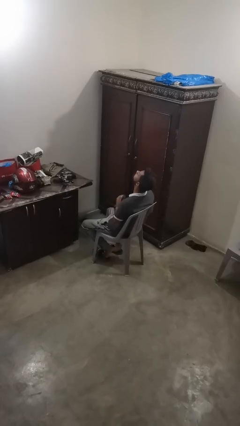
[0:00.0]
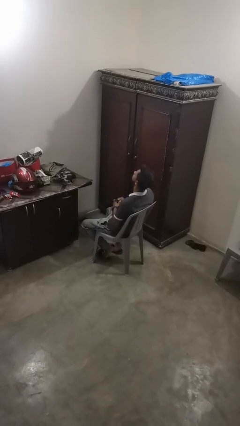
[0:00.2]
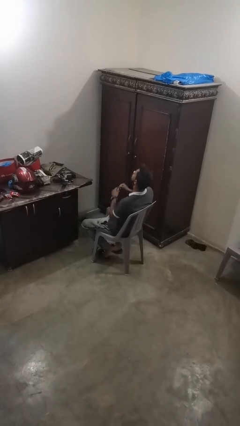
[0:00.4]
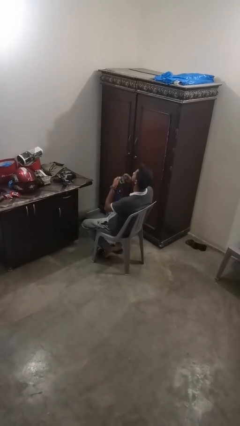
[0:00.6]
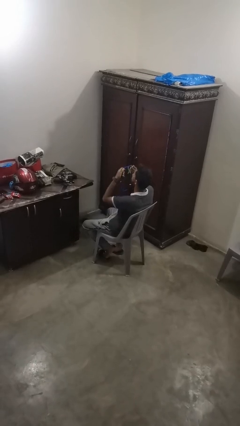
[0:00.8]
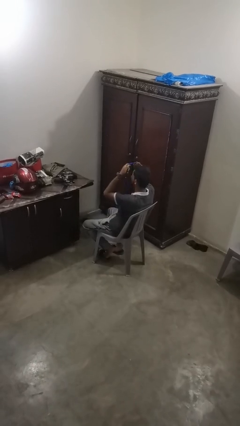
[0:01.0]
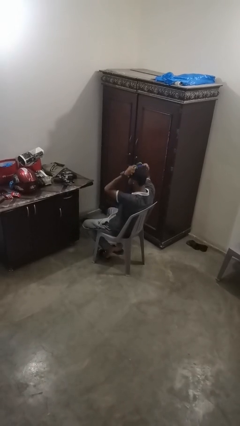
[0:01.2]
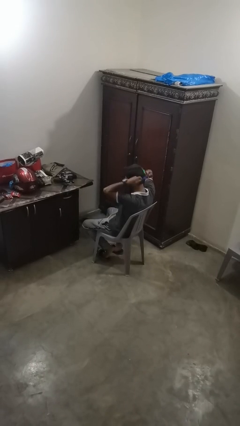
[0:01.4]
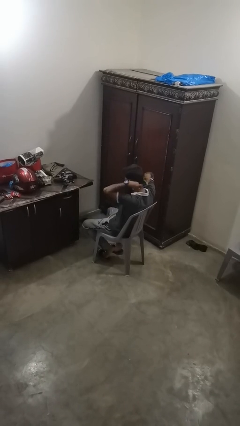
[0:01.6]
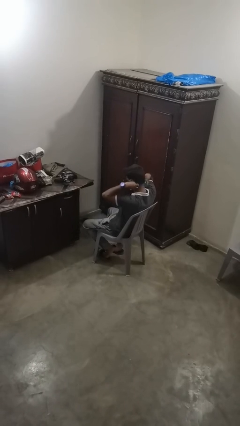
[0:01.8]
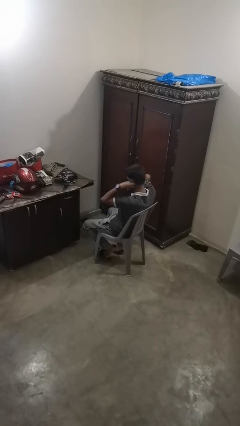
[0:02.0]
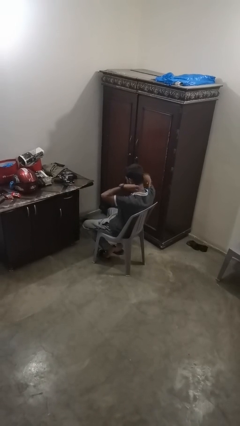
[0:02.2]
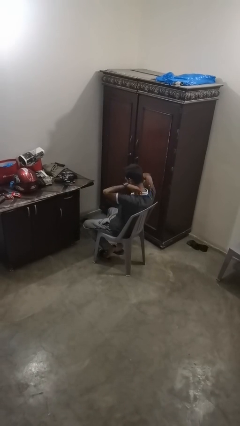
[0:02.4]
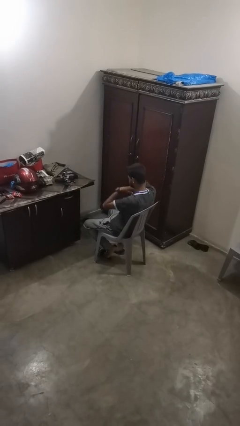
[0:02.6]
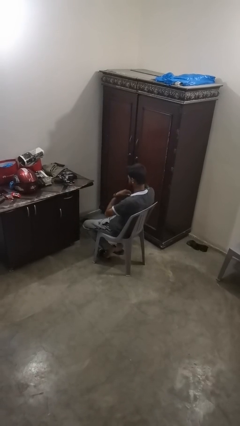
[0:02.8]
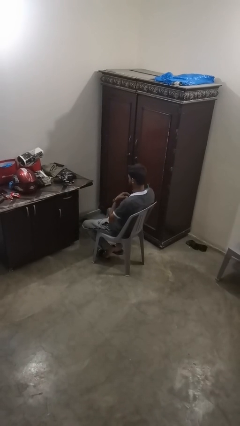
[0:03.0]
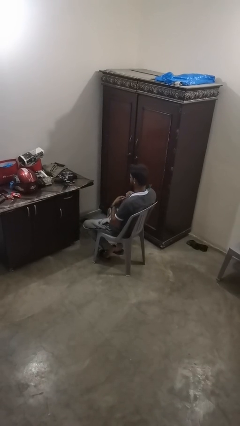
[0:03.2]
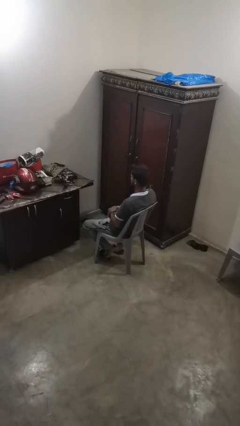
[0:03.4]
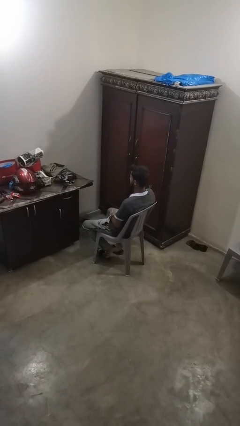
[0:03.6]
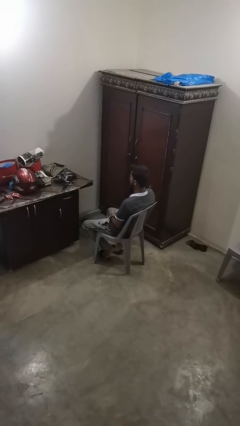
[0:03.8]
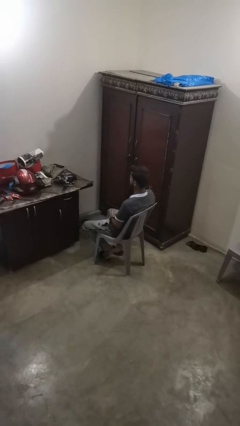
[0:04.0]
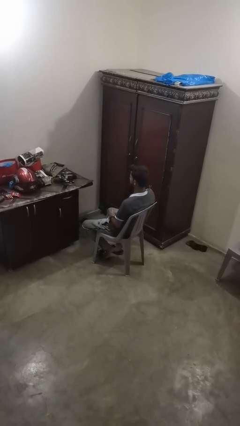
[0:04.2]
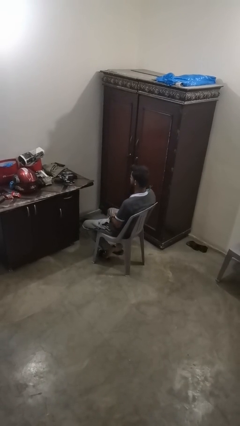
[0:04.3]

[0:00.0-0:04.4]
person puts on necklace

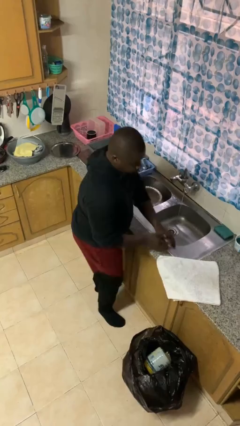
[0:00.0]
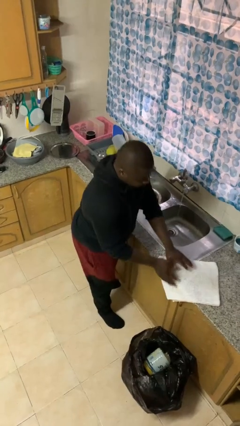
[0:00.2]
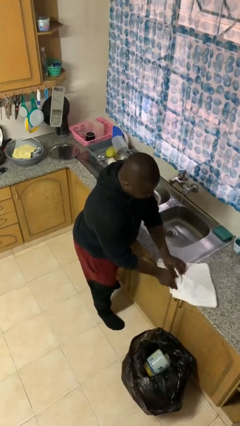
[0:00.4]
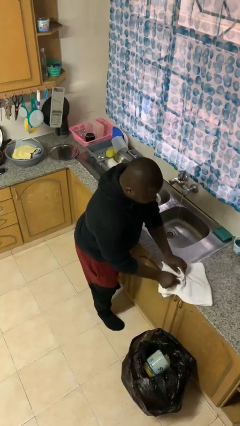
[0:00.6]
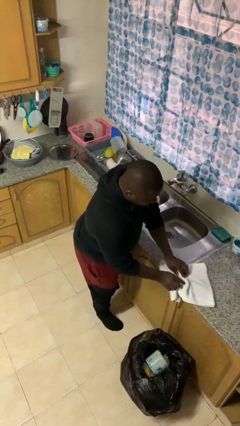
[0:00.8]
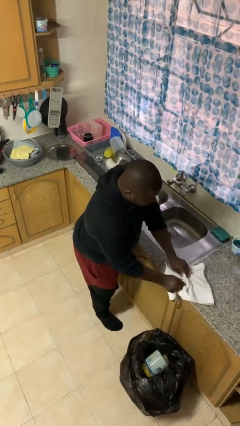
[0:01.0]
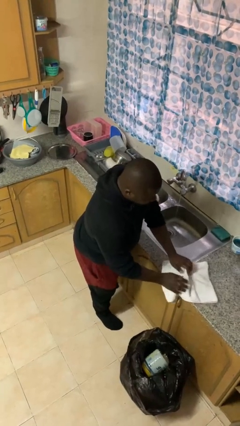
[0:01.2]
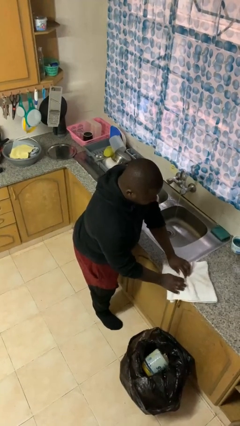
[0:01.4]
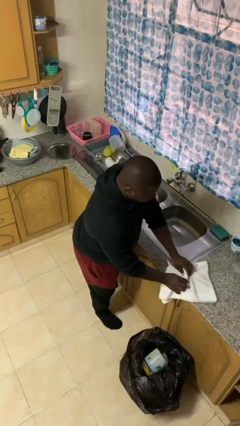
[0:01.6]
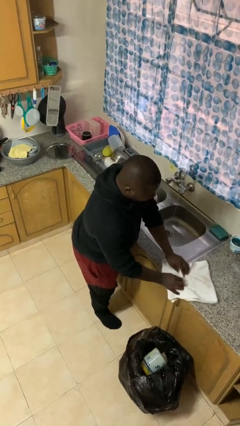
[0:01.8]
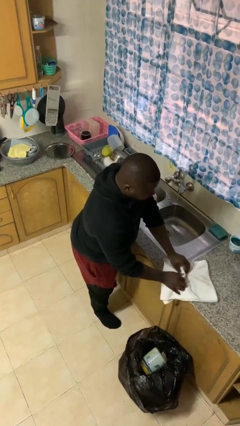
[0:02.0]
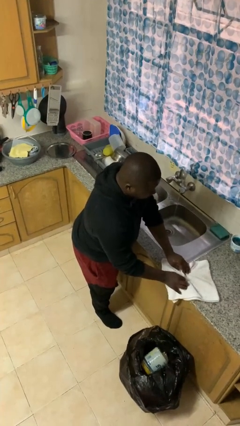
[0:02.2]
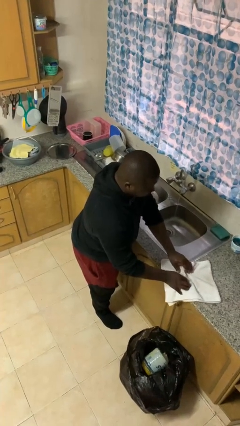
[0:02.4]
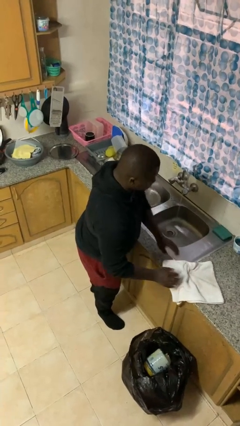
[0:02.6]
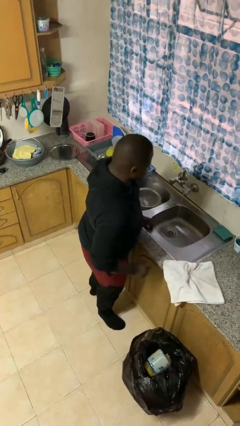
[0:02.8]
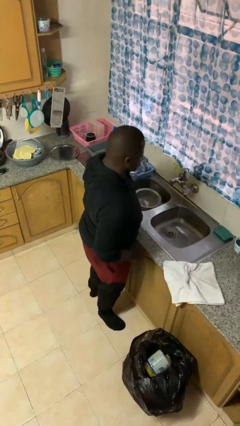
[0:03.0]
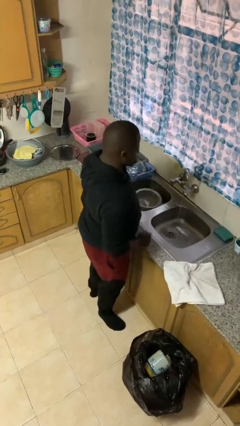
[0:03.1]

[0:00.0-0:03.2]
person dries hands with towel

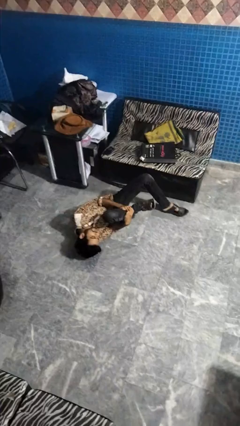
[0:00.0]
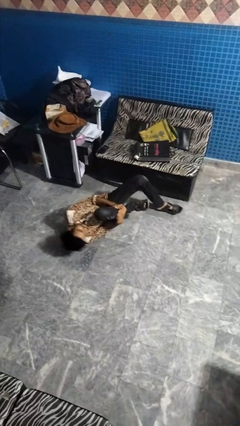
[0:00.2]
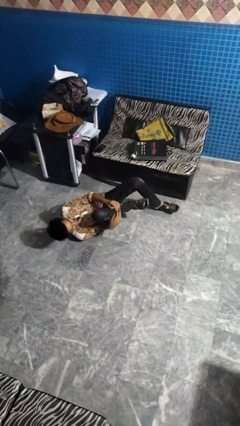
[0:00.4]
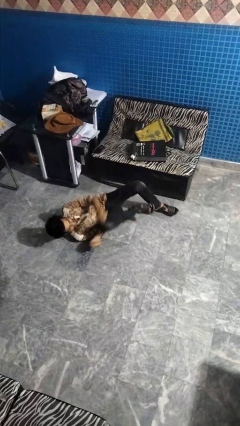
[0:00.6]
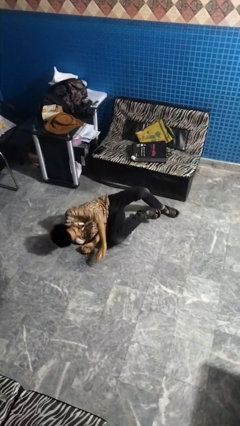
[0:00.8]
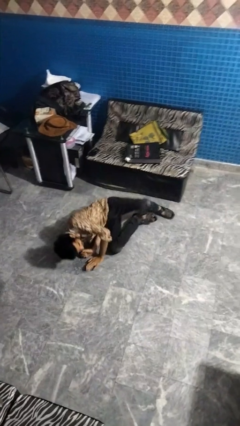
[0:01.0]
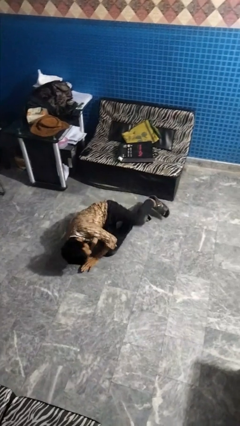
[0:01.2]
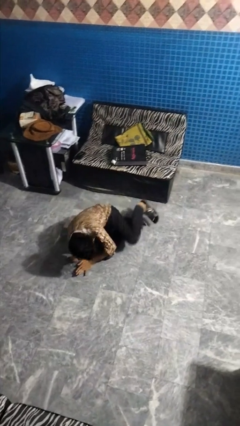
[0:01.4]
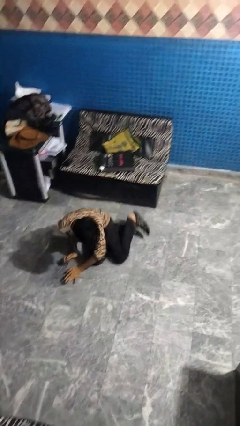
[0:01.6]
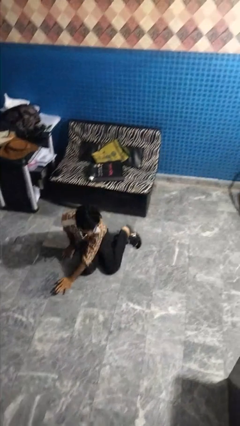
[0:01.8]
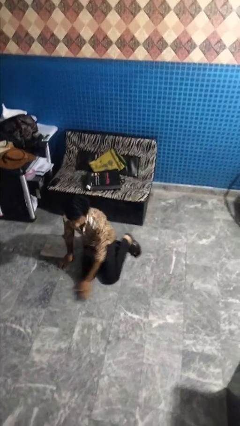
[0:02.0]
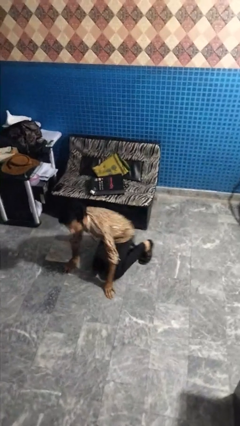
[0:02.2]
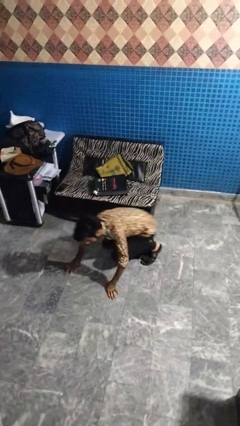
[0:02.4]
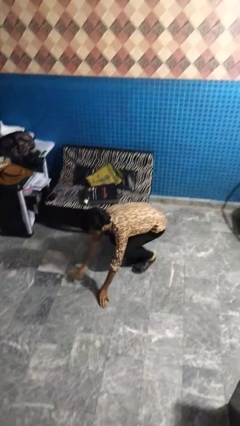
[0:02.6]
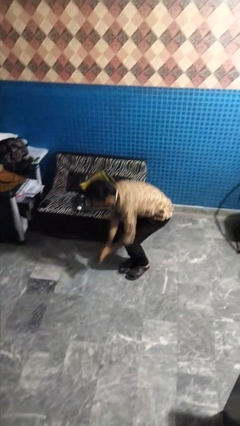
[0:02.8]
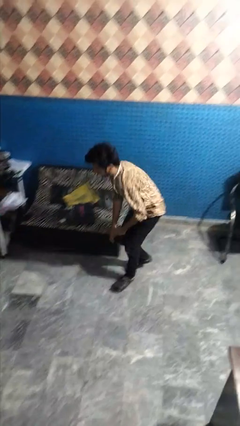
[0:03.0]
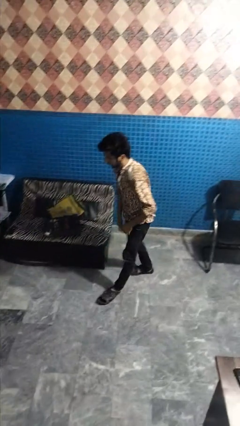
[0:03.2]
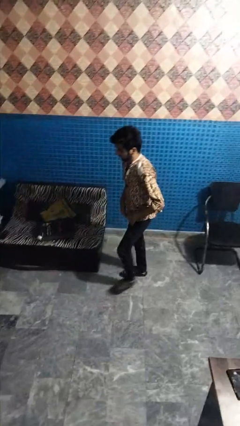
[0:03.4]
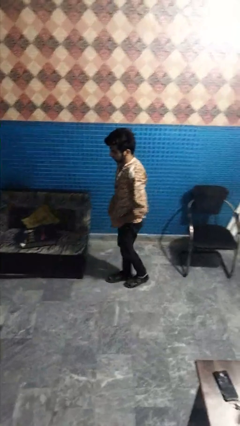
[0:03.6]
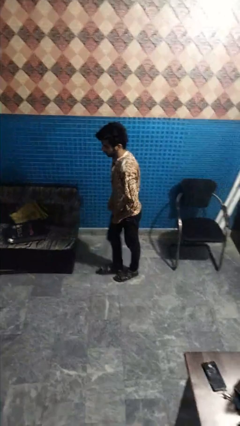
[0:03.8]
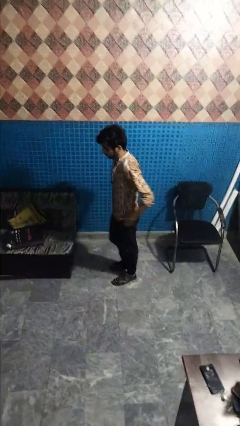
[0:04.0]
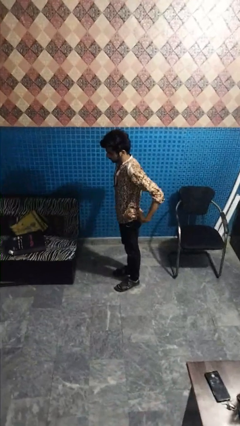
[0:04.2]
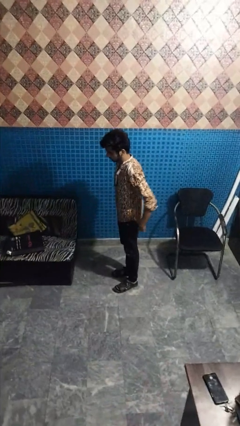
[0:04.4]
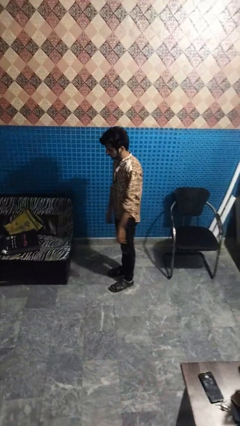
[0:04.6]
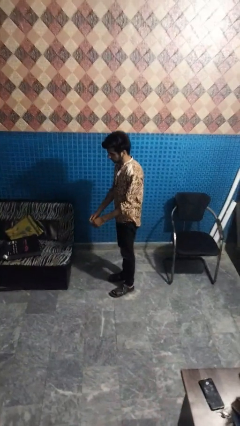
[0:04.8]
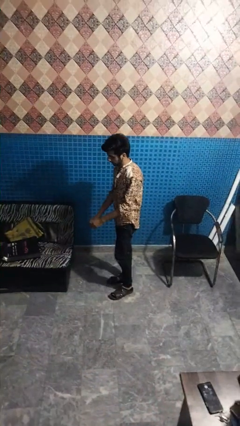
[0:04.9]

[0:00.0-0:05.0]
person stands up from floor

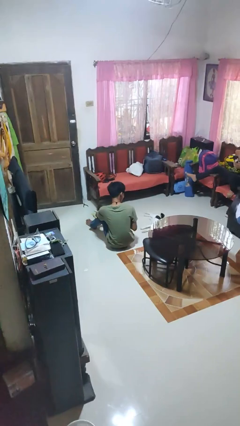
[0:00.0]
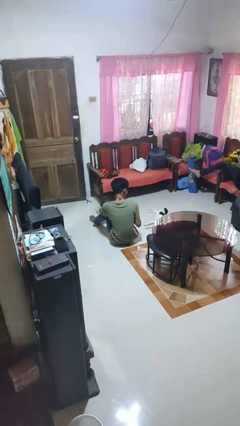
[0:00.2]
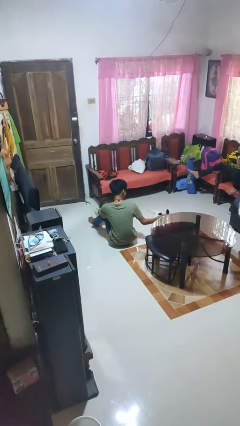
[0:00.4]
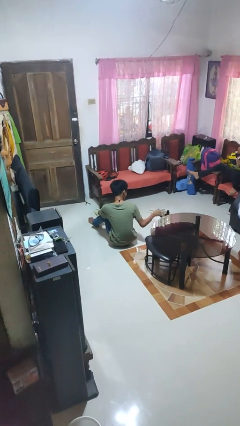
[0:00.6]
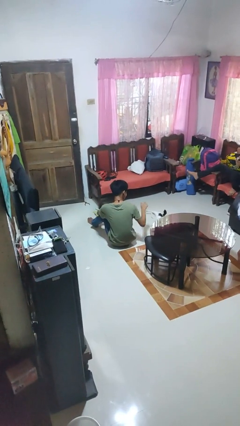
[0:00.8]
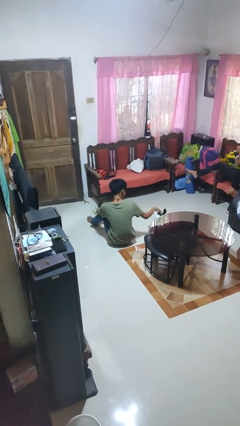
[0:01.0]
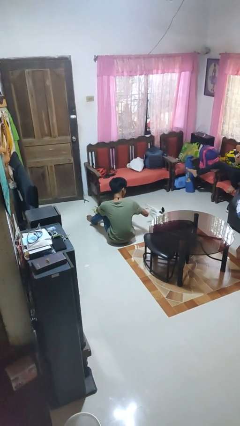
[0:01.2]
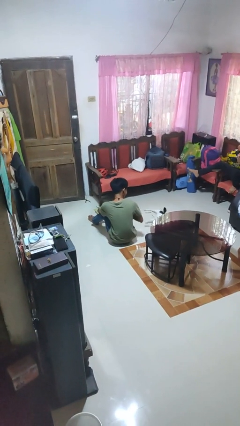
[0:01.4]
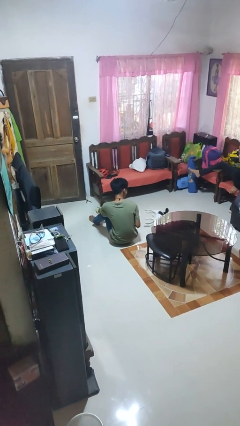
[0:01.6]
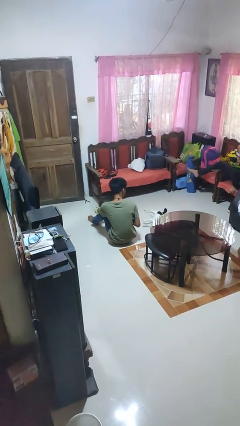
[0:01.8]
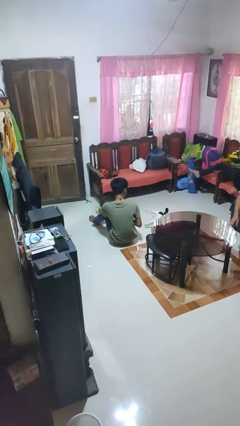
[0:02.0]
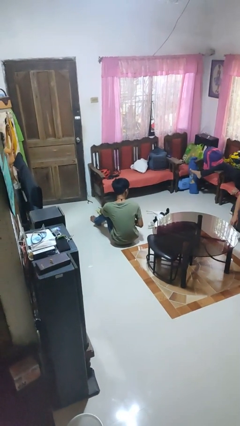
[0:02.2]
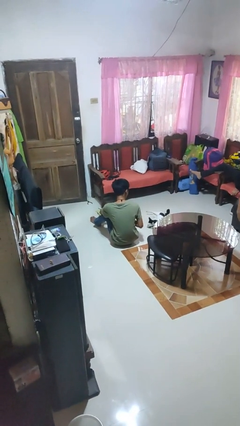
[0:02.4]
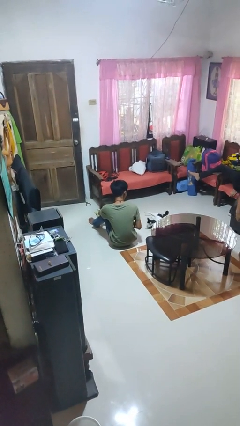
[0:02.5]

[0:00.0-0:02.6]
person pets cat

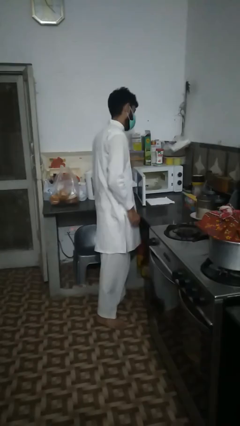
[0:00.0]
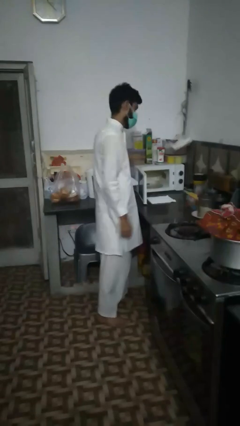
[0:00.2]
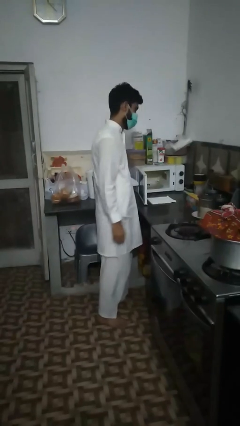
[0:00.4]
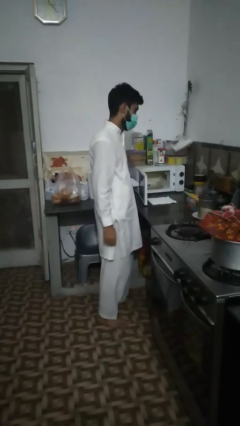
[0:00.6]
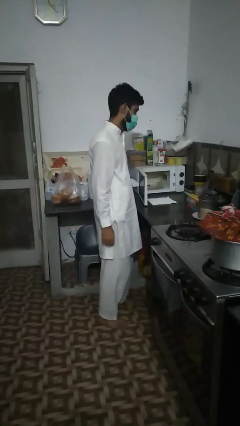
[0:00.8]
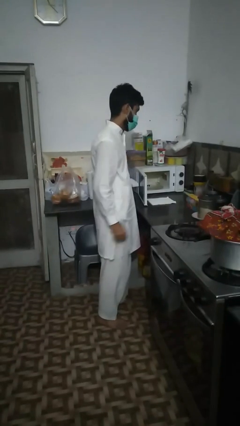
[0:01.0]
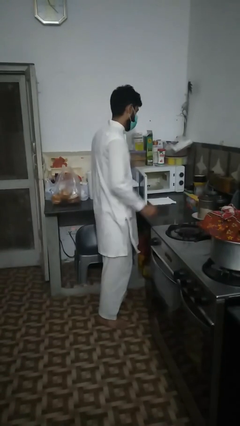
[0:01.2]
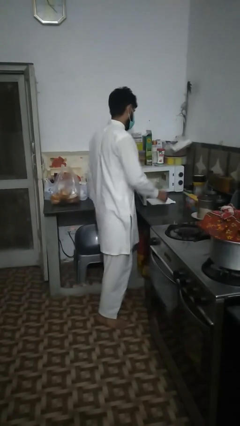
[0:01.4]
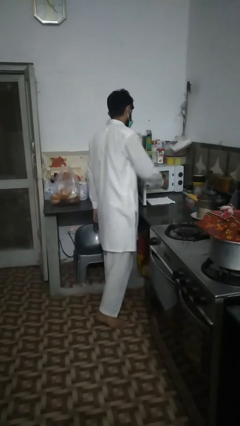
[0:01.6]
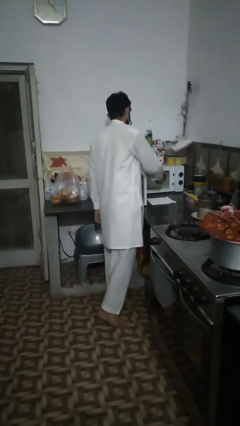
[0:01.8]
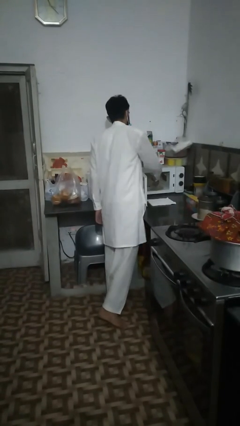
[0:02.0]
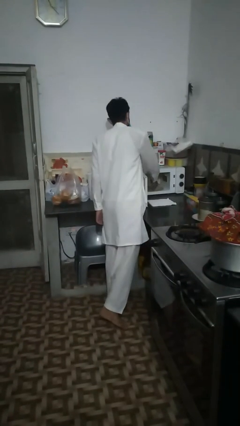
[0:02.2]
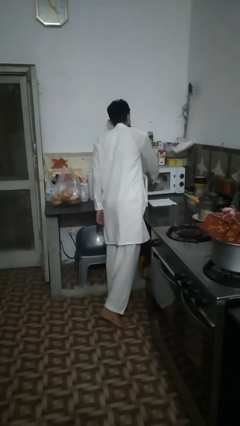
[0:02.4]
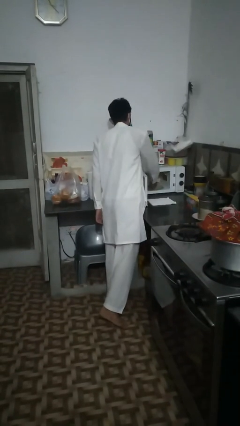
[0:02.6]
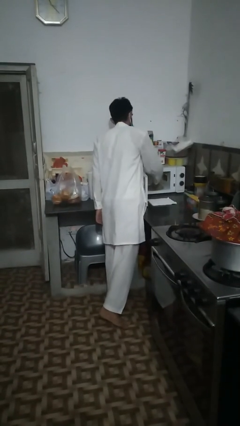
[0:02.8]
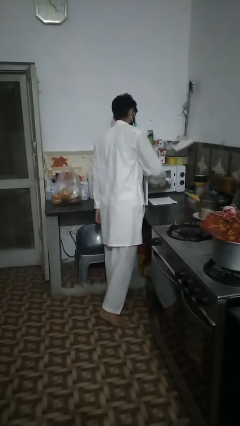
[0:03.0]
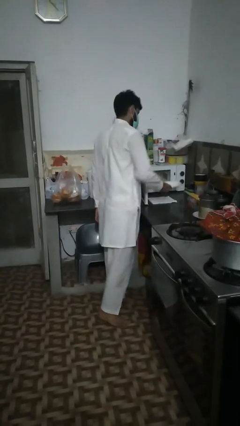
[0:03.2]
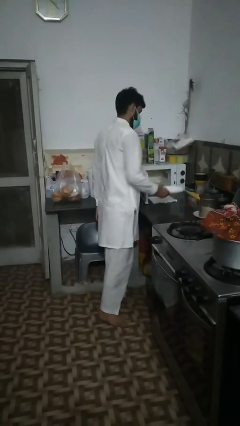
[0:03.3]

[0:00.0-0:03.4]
person takes object from microwave
